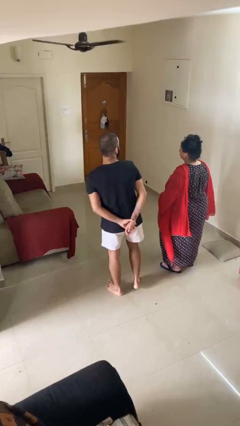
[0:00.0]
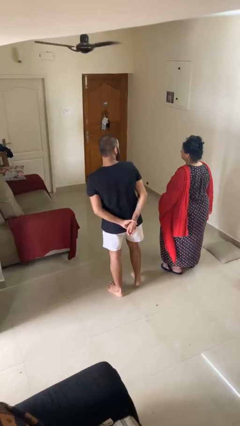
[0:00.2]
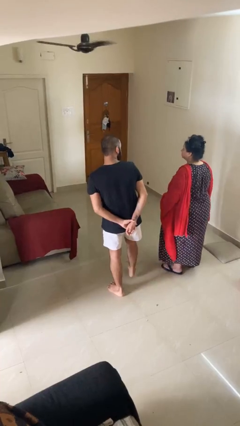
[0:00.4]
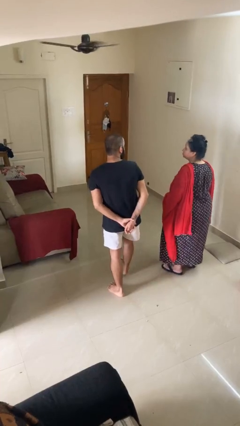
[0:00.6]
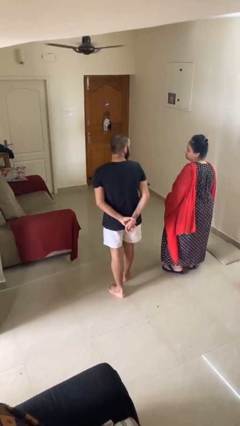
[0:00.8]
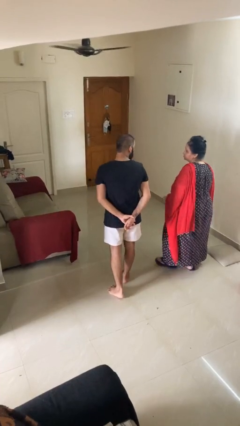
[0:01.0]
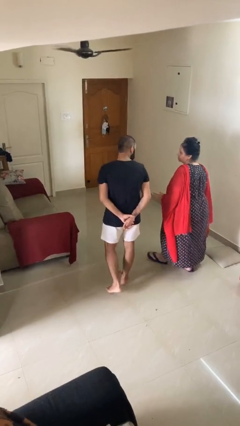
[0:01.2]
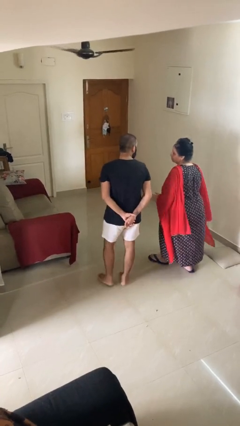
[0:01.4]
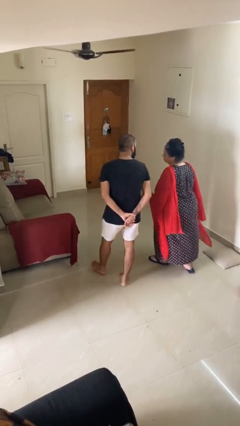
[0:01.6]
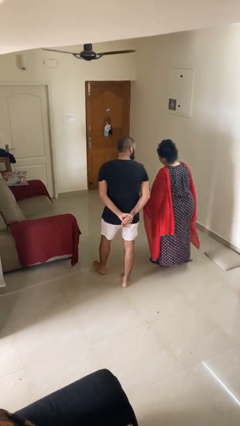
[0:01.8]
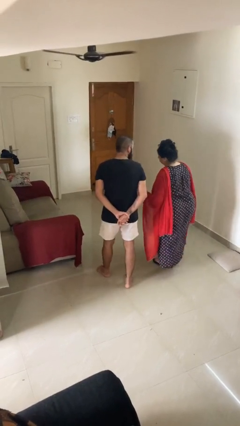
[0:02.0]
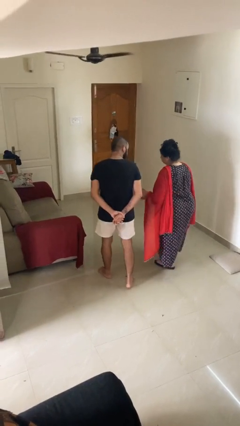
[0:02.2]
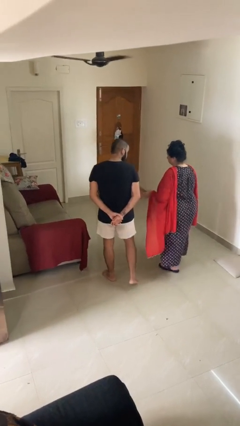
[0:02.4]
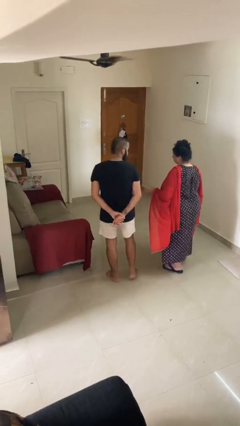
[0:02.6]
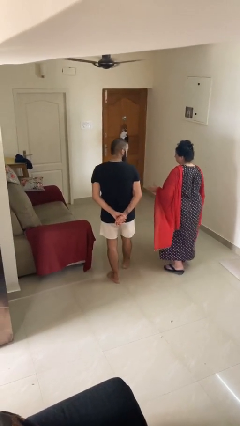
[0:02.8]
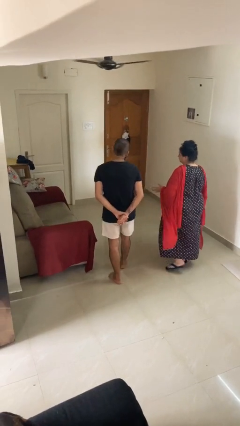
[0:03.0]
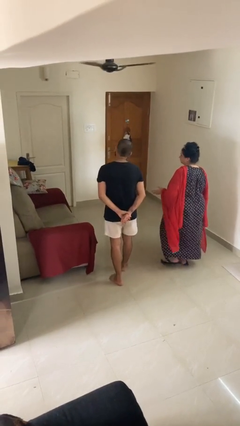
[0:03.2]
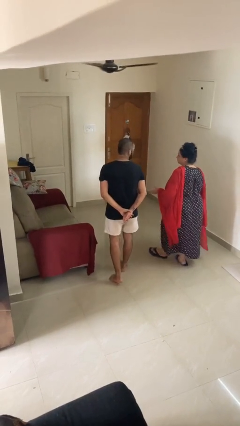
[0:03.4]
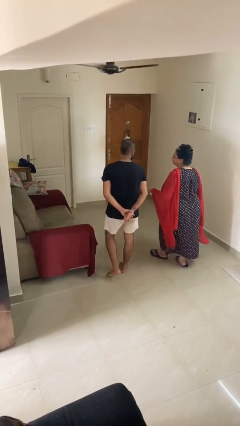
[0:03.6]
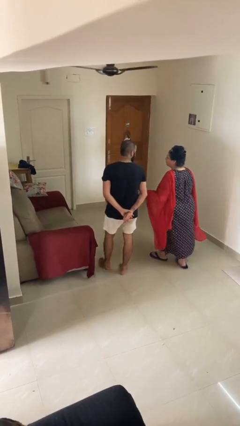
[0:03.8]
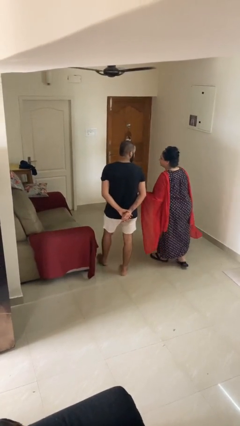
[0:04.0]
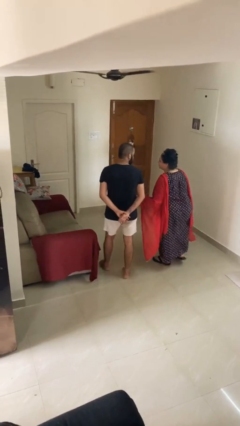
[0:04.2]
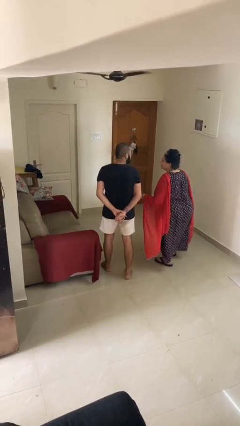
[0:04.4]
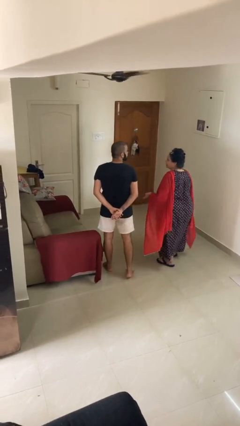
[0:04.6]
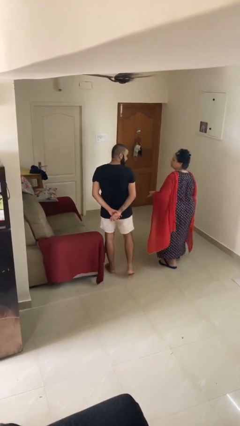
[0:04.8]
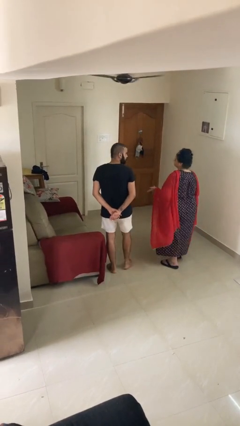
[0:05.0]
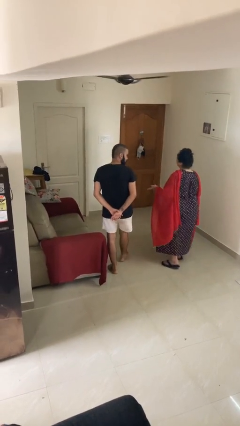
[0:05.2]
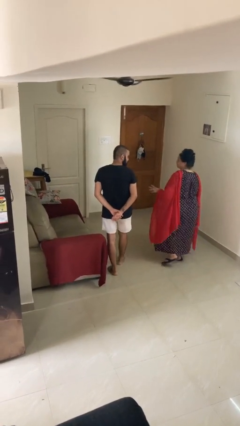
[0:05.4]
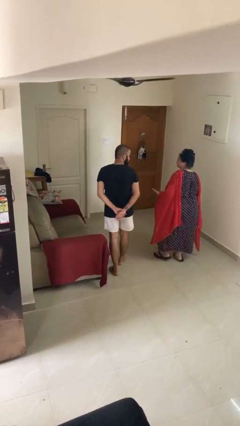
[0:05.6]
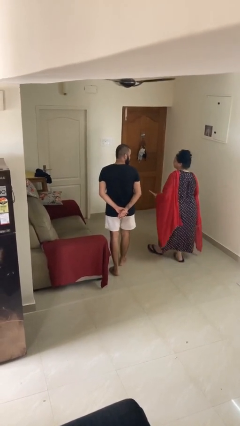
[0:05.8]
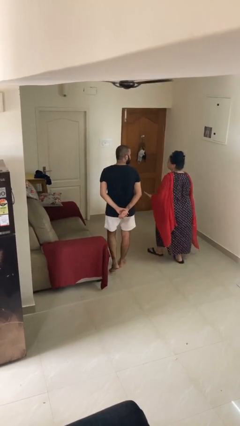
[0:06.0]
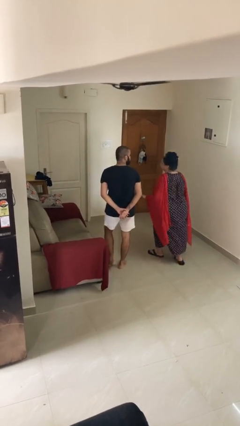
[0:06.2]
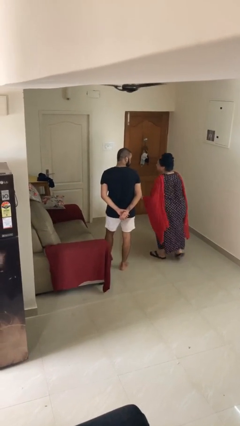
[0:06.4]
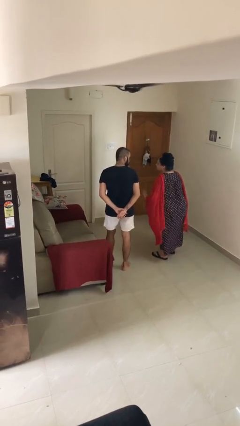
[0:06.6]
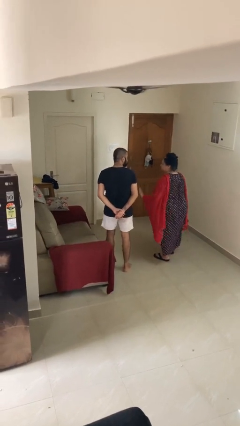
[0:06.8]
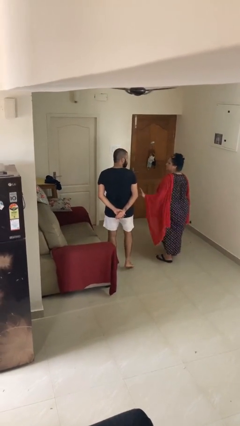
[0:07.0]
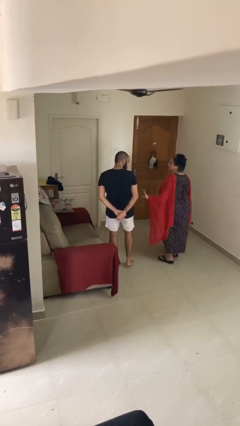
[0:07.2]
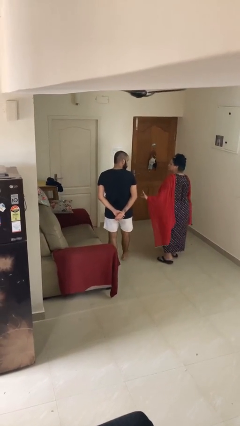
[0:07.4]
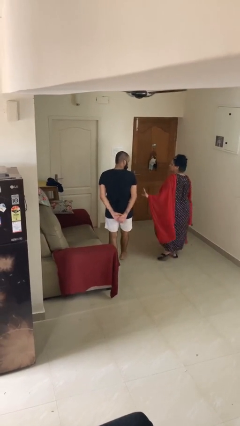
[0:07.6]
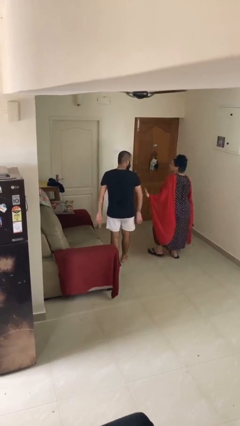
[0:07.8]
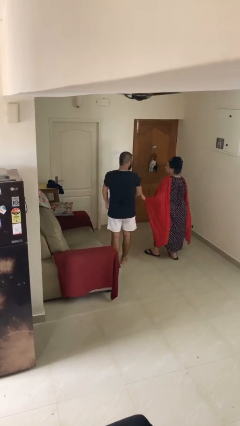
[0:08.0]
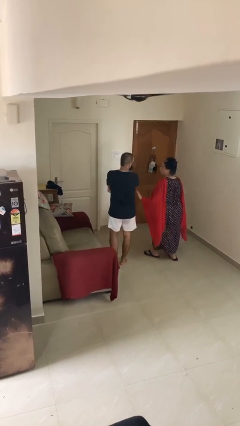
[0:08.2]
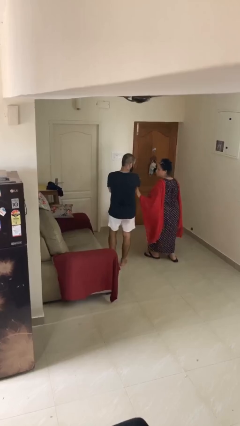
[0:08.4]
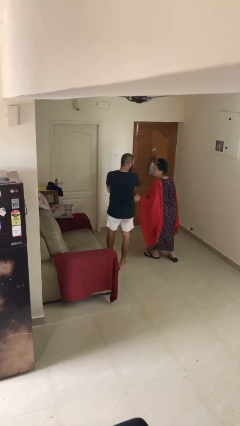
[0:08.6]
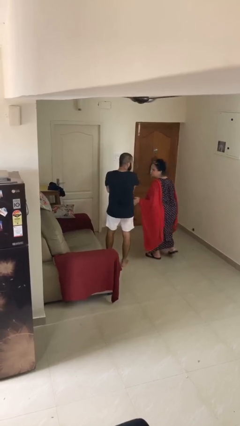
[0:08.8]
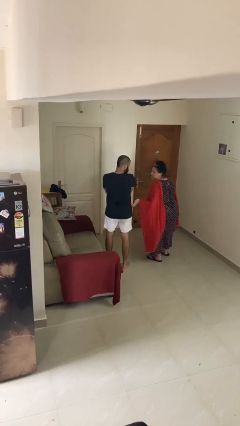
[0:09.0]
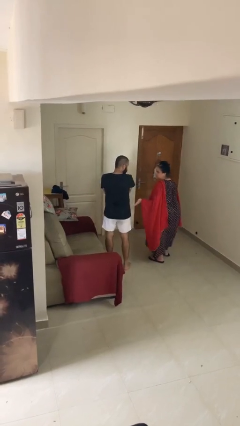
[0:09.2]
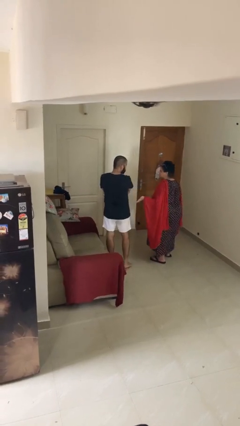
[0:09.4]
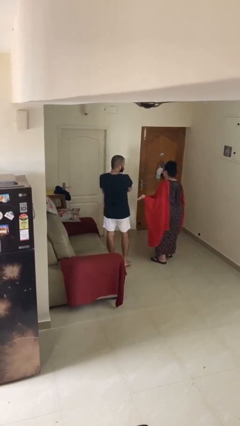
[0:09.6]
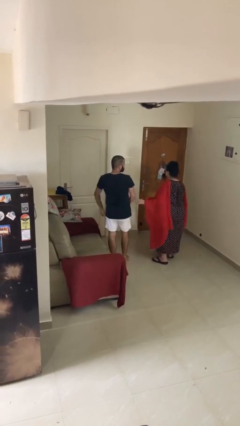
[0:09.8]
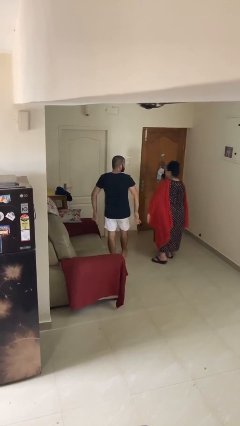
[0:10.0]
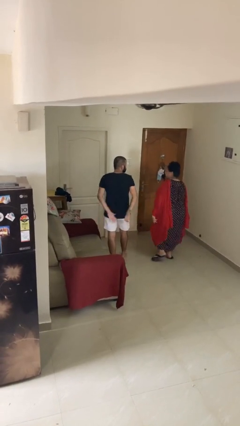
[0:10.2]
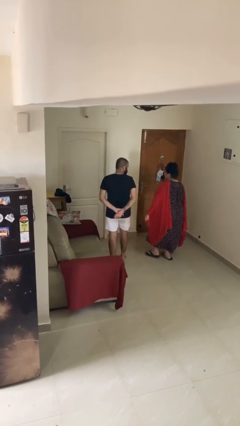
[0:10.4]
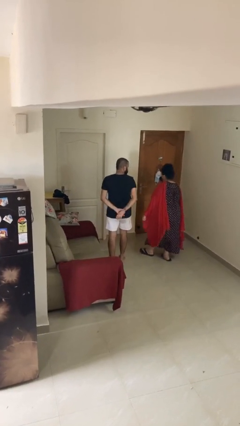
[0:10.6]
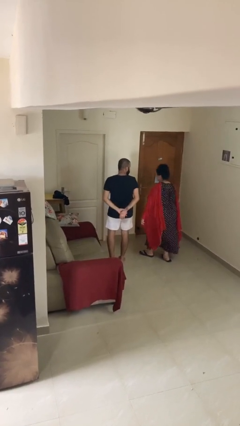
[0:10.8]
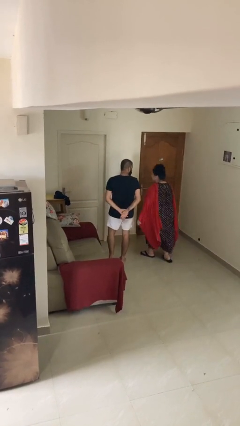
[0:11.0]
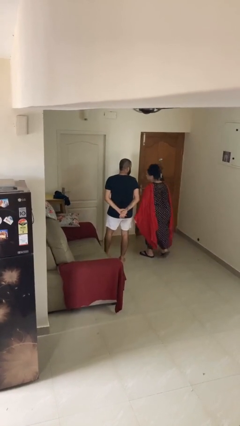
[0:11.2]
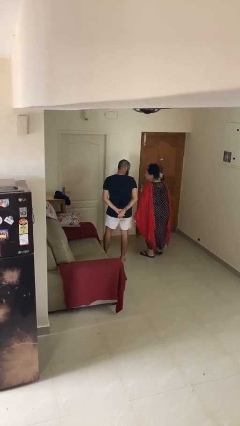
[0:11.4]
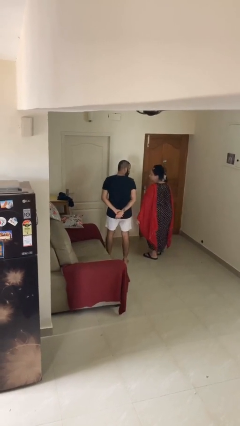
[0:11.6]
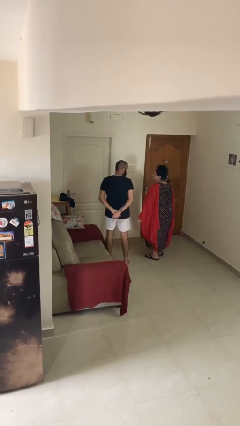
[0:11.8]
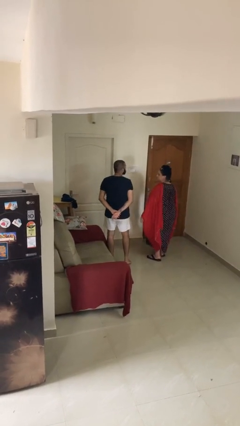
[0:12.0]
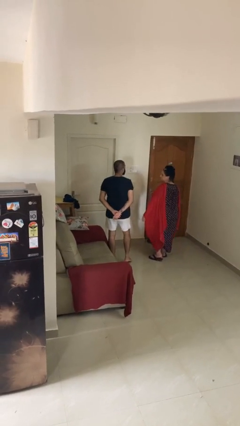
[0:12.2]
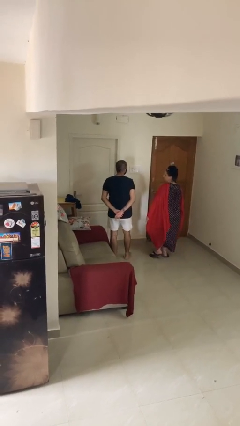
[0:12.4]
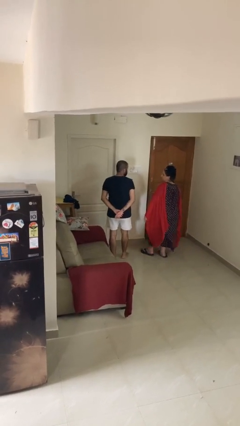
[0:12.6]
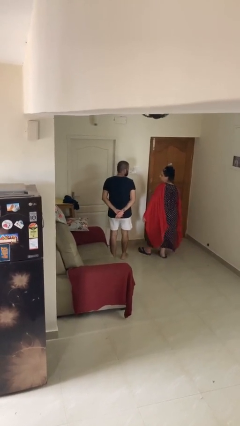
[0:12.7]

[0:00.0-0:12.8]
person talks to person

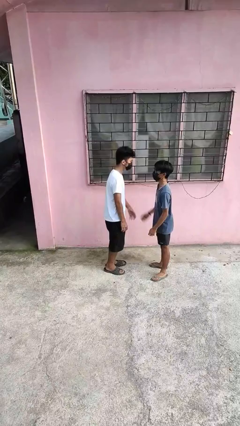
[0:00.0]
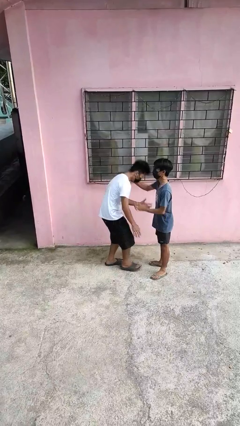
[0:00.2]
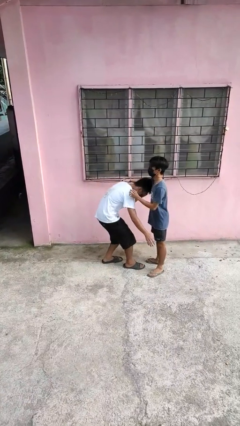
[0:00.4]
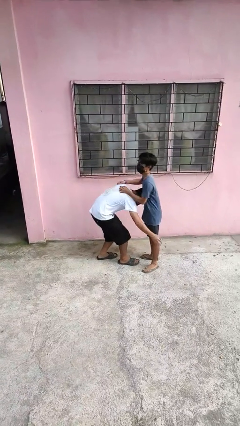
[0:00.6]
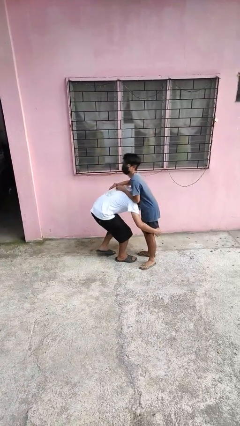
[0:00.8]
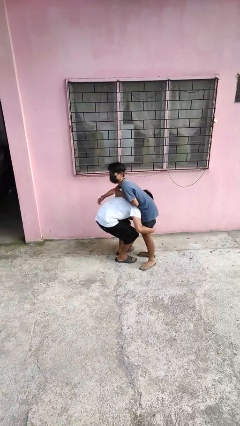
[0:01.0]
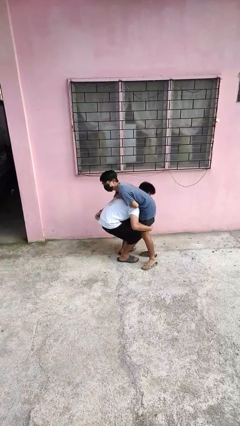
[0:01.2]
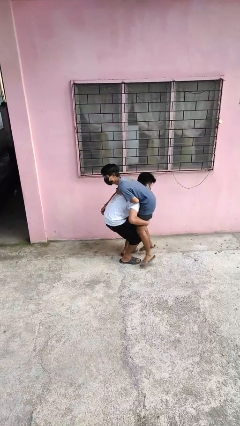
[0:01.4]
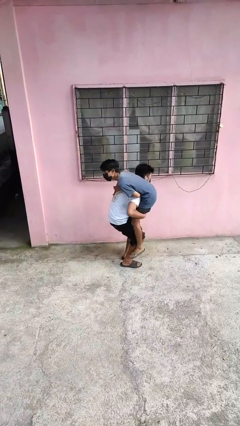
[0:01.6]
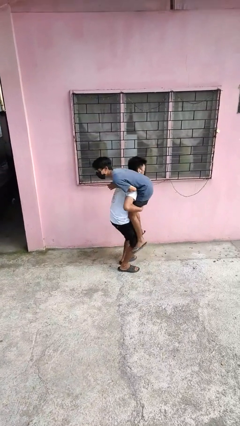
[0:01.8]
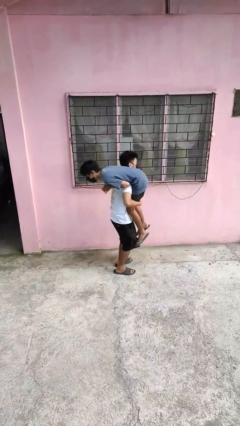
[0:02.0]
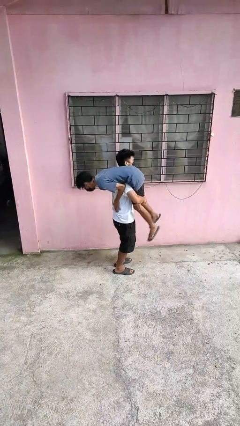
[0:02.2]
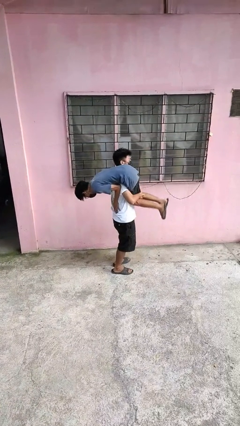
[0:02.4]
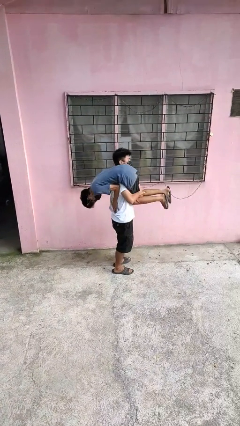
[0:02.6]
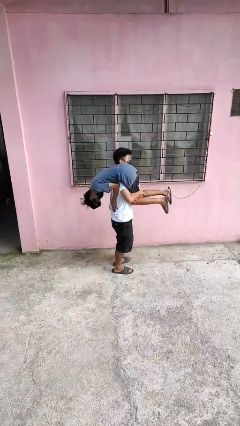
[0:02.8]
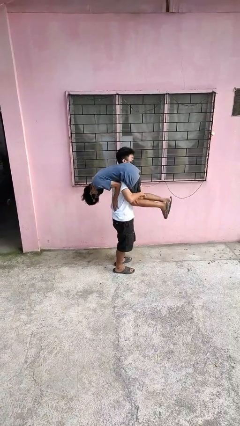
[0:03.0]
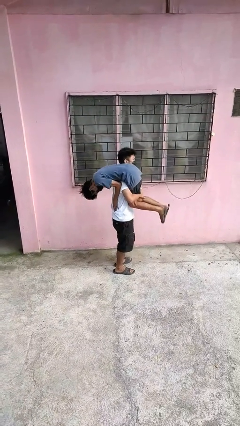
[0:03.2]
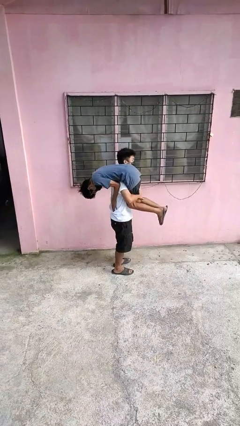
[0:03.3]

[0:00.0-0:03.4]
person carries person over shoulder

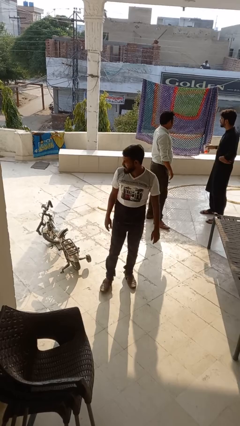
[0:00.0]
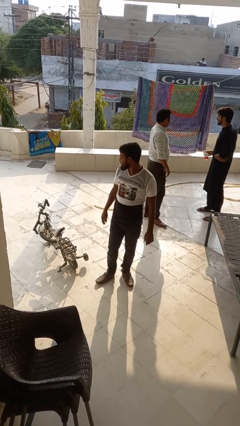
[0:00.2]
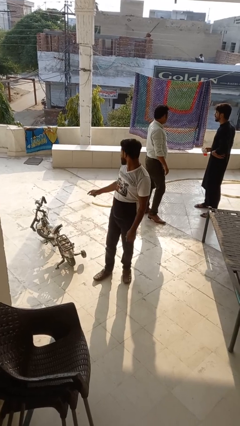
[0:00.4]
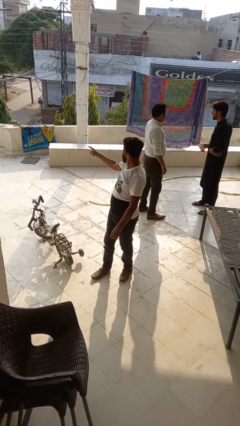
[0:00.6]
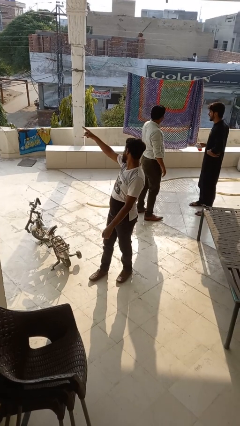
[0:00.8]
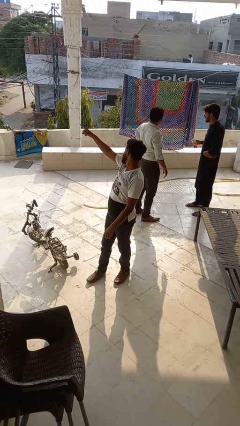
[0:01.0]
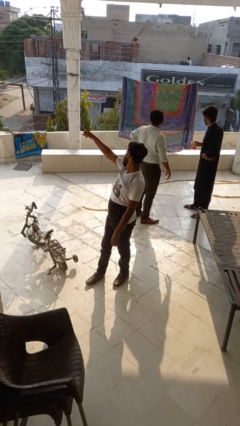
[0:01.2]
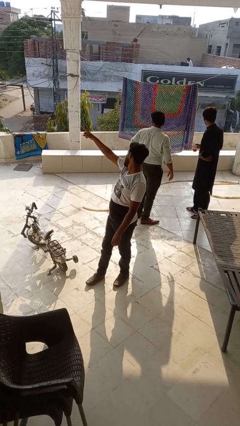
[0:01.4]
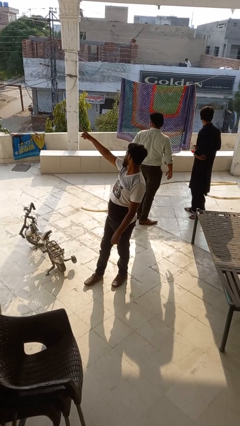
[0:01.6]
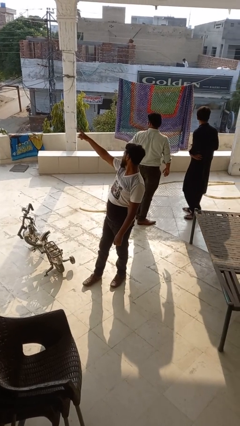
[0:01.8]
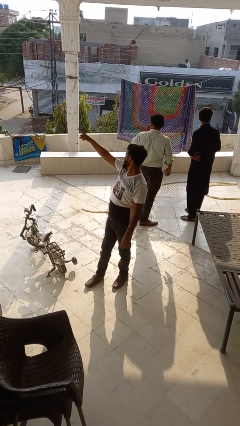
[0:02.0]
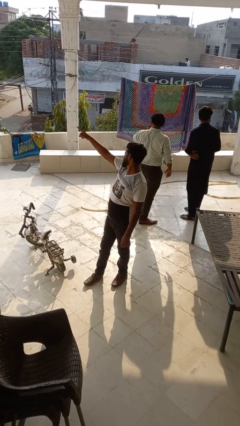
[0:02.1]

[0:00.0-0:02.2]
person points at person
